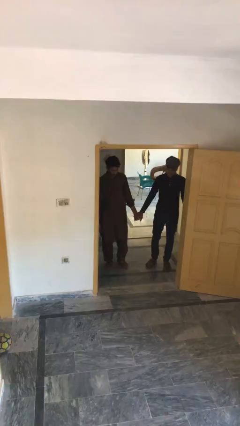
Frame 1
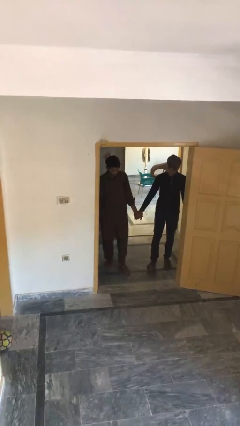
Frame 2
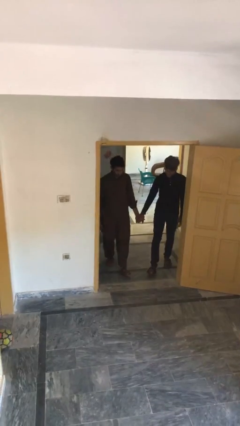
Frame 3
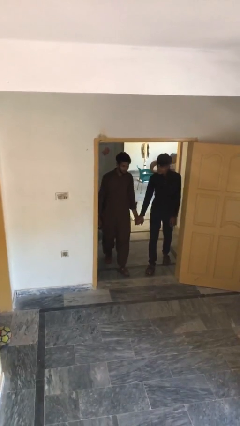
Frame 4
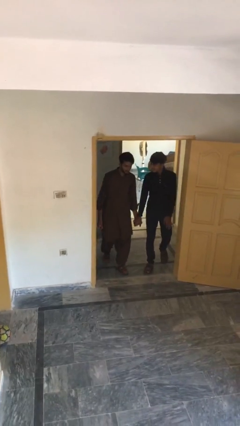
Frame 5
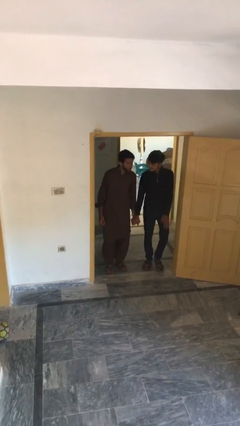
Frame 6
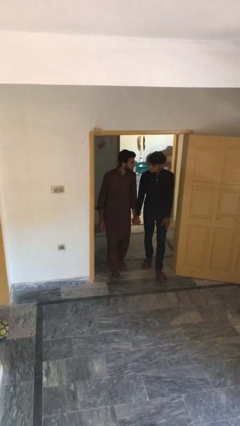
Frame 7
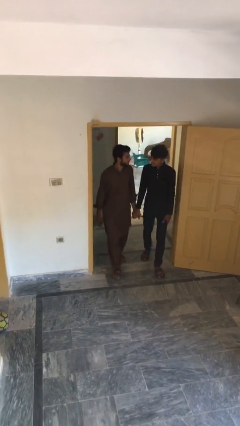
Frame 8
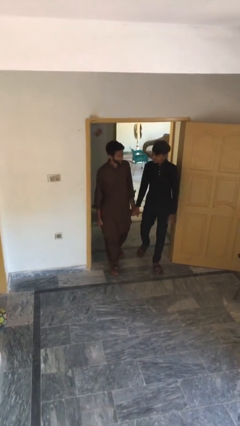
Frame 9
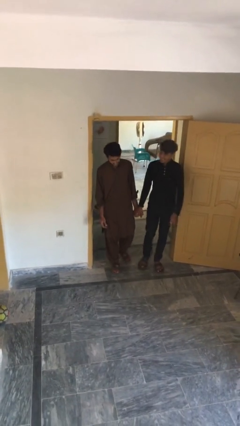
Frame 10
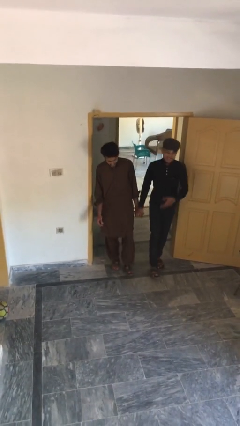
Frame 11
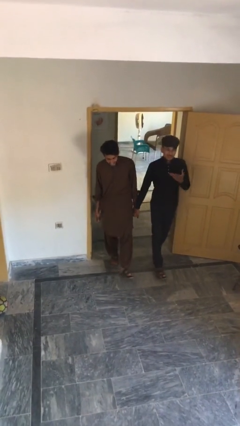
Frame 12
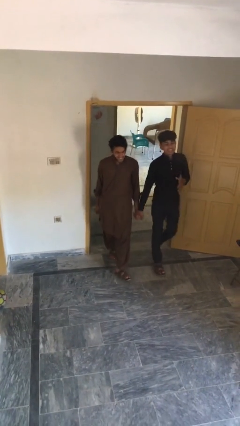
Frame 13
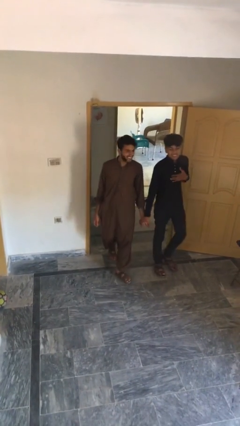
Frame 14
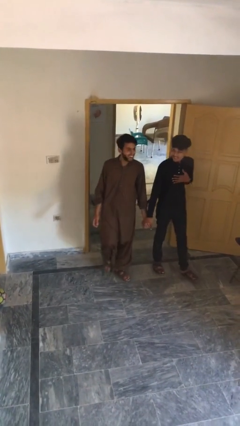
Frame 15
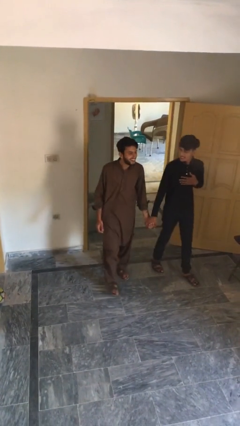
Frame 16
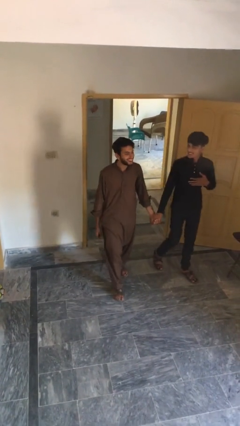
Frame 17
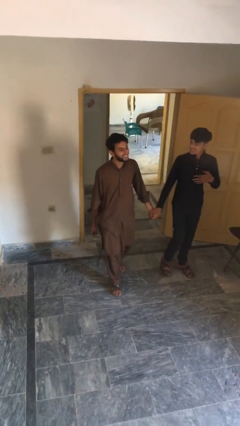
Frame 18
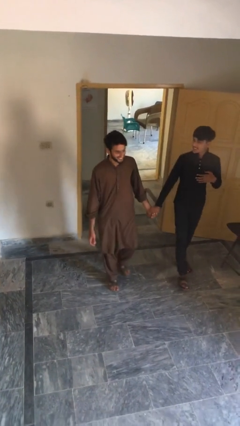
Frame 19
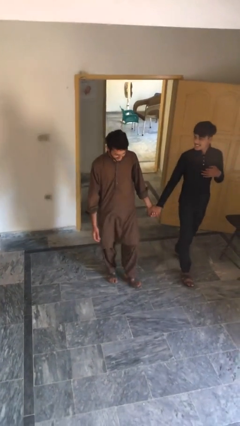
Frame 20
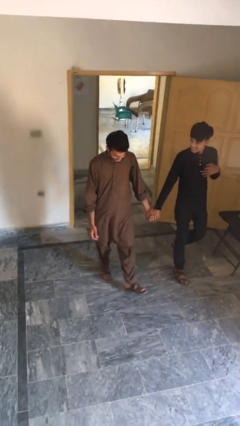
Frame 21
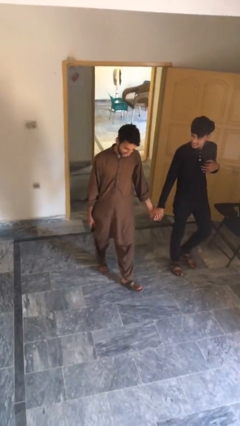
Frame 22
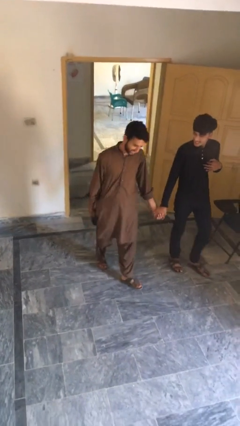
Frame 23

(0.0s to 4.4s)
person holds hand

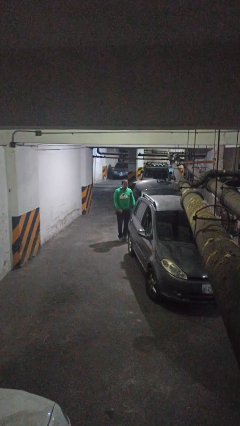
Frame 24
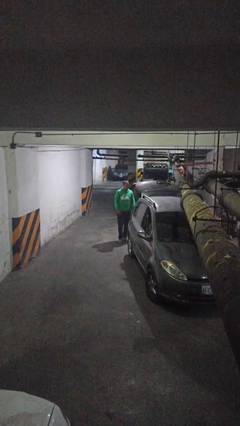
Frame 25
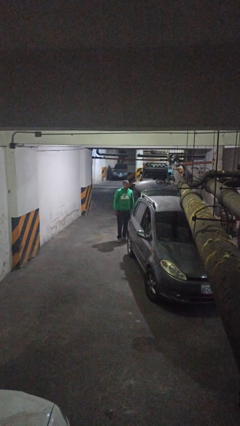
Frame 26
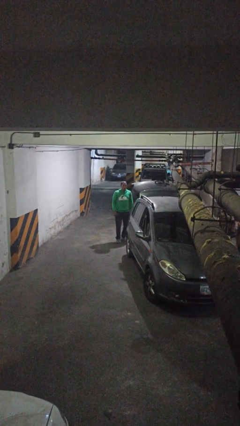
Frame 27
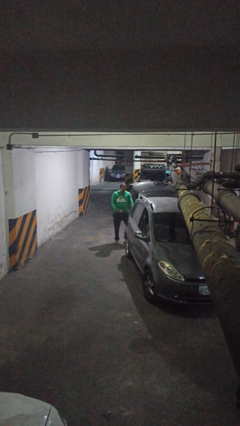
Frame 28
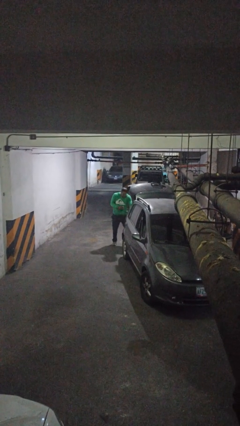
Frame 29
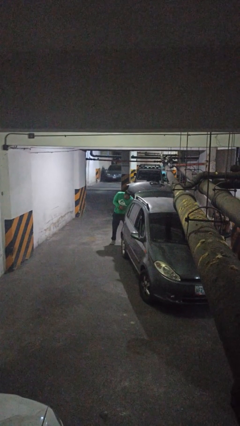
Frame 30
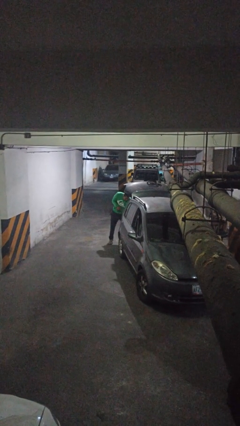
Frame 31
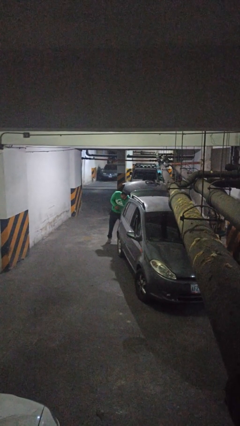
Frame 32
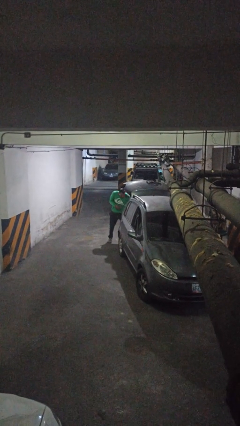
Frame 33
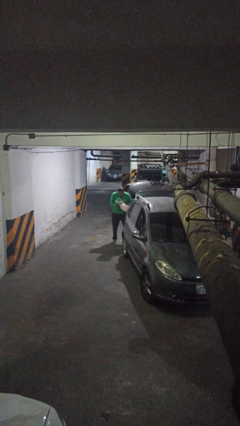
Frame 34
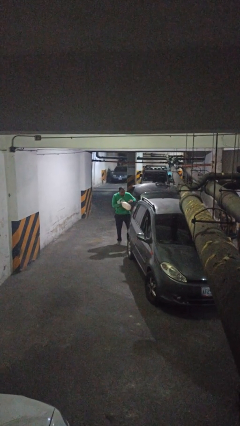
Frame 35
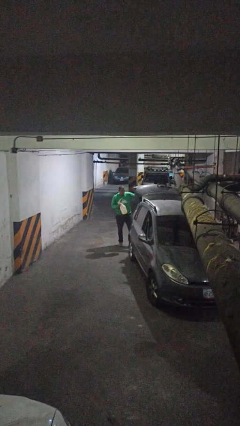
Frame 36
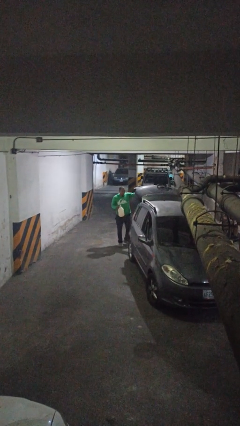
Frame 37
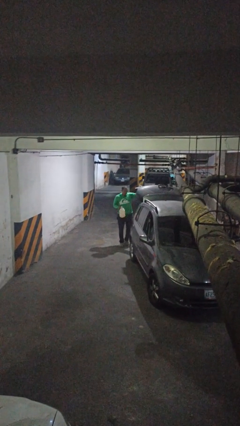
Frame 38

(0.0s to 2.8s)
person unloads car

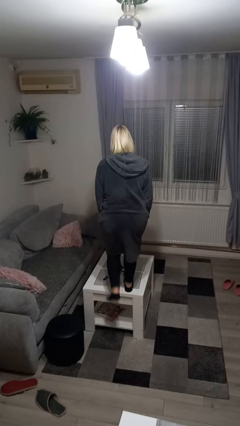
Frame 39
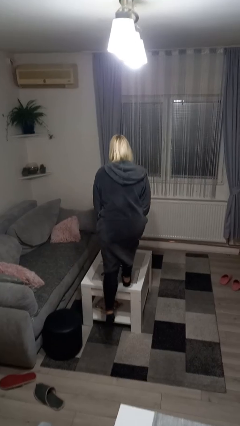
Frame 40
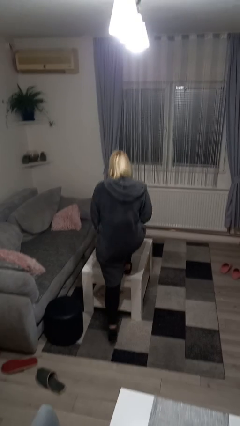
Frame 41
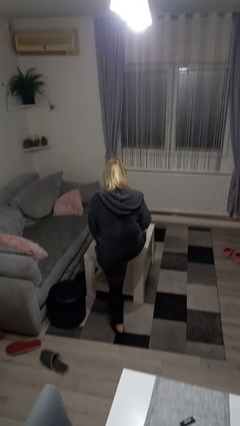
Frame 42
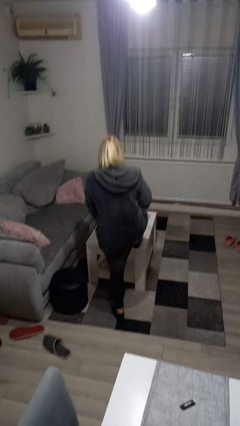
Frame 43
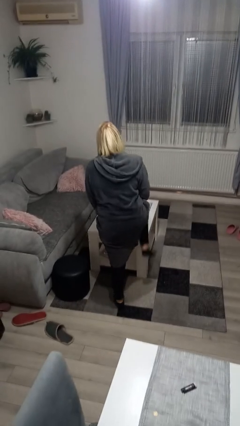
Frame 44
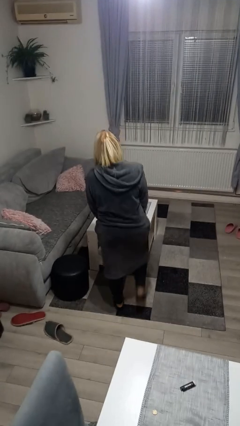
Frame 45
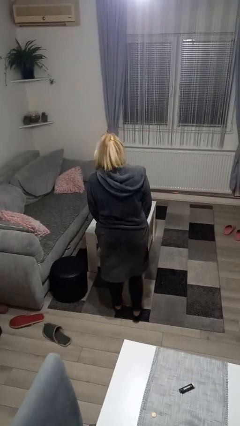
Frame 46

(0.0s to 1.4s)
person climbs off table

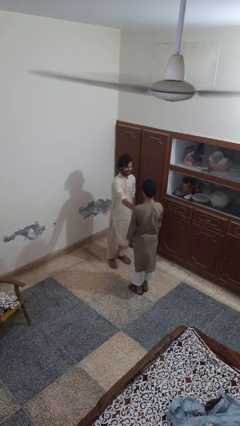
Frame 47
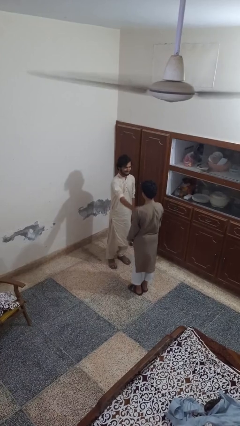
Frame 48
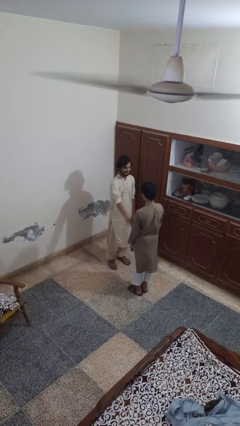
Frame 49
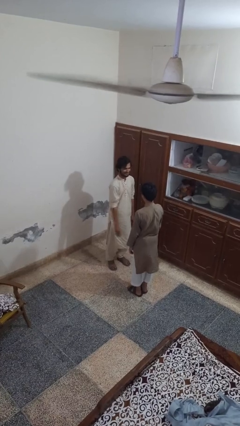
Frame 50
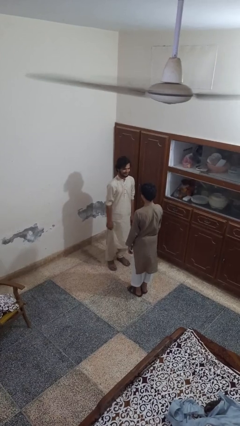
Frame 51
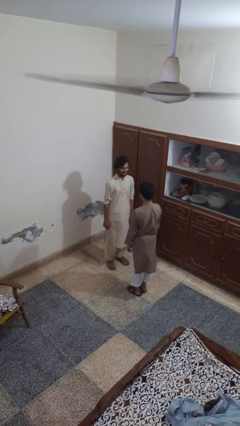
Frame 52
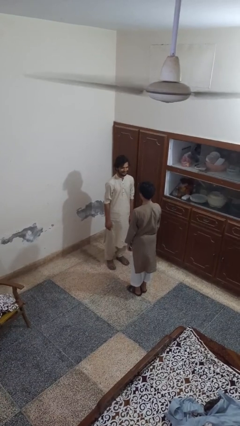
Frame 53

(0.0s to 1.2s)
person shoves person

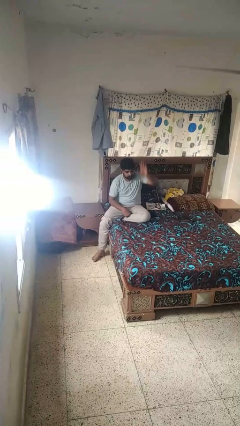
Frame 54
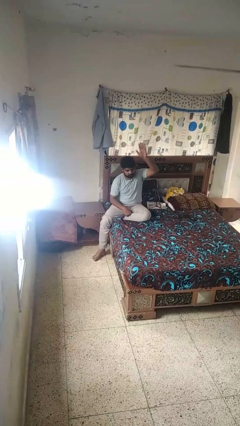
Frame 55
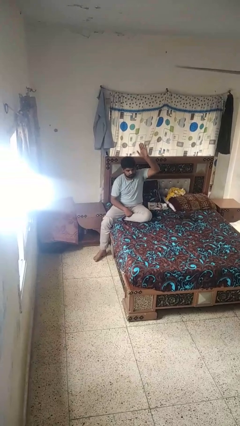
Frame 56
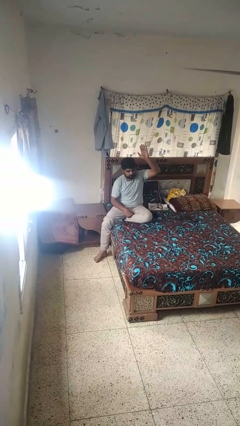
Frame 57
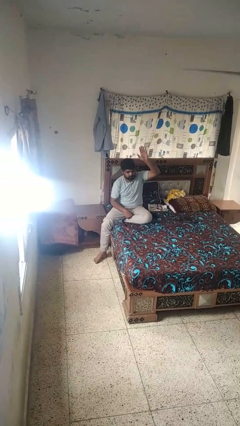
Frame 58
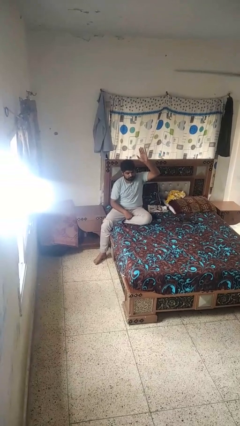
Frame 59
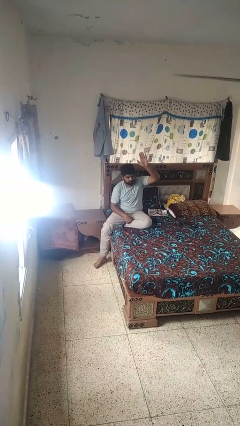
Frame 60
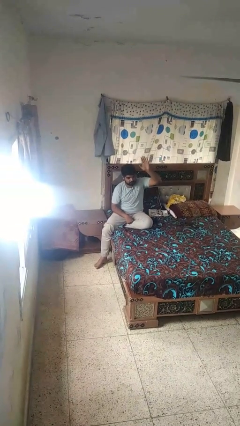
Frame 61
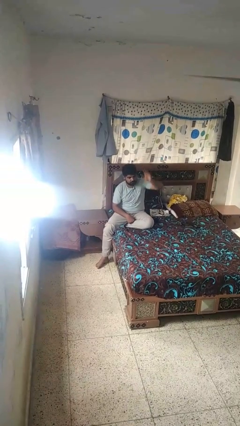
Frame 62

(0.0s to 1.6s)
person gestures raise hand

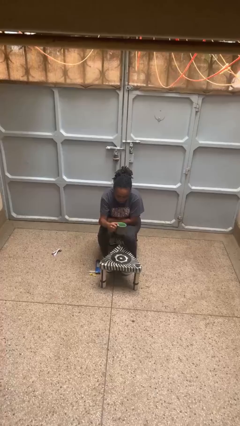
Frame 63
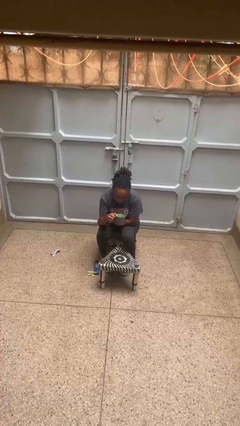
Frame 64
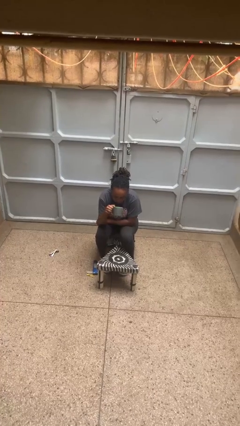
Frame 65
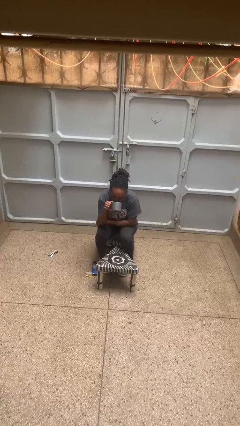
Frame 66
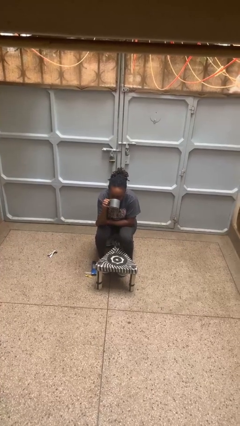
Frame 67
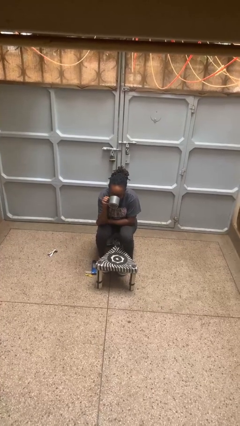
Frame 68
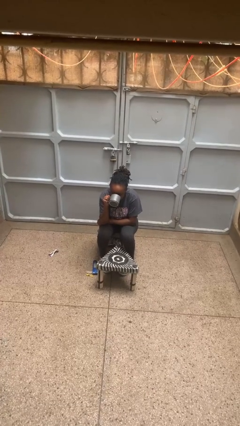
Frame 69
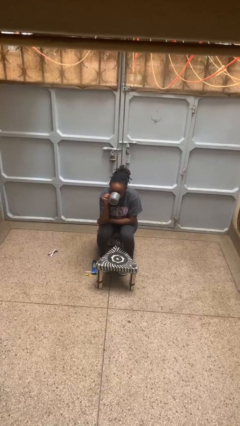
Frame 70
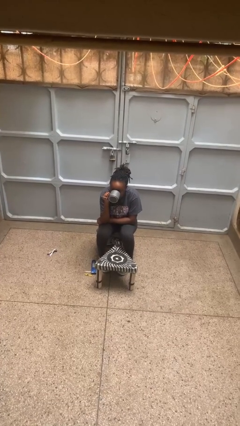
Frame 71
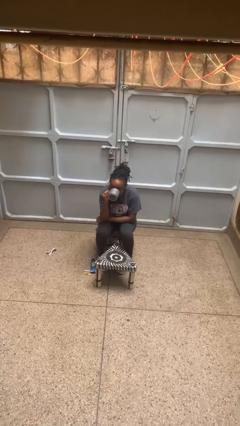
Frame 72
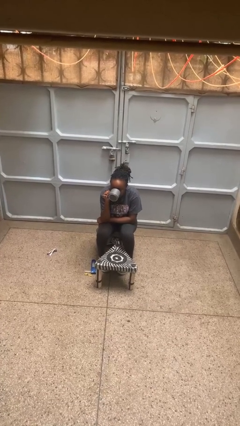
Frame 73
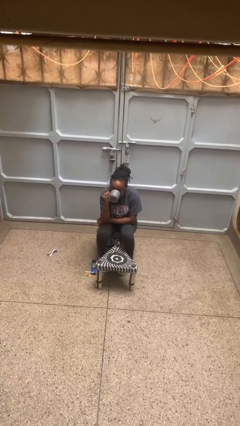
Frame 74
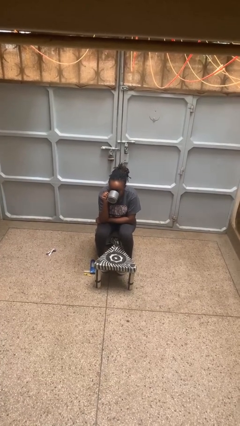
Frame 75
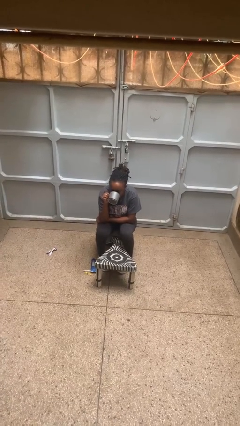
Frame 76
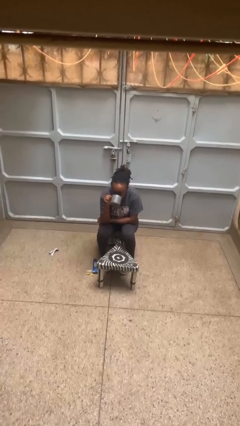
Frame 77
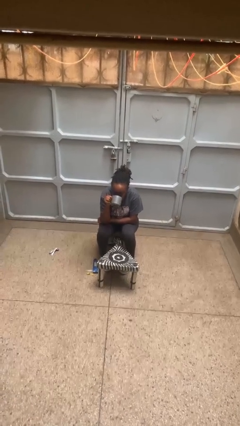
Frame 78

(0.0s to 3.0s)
person drinks from mug

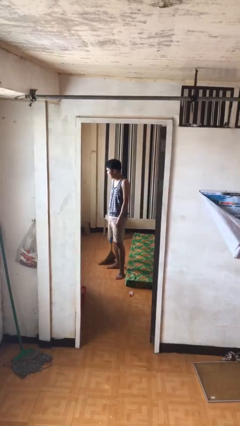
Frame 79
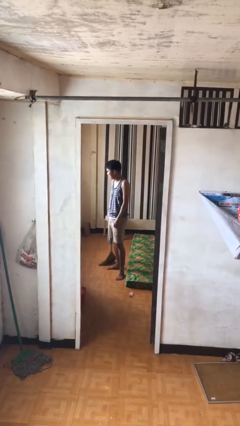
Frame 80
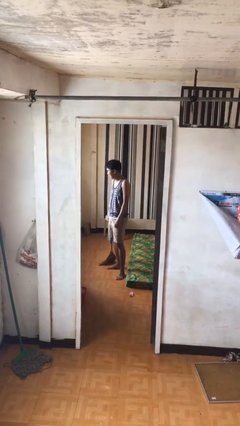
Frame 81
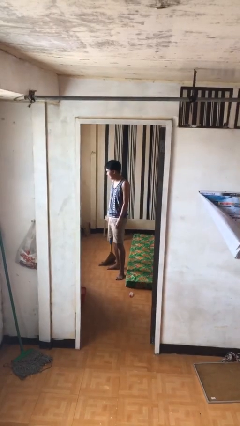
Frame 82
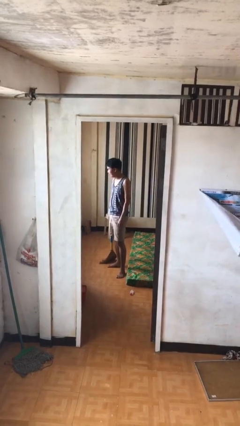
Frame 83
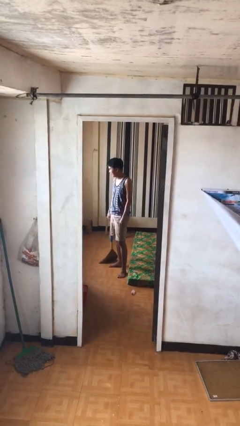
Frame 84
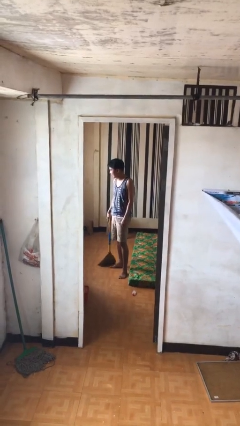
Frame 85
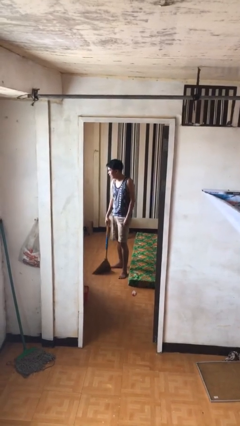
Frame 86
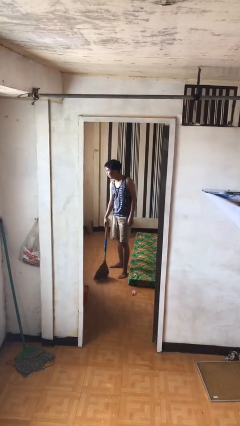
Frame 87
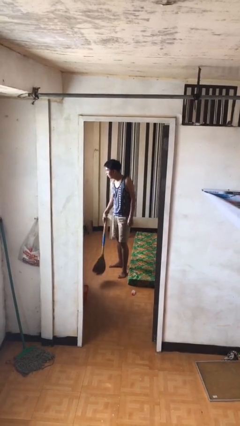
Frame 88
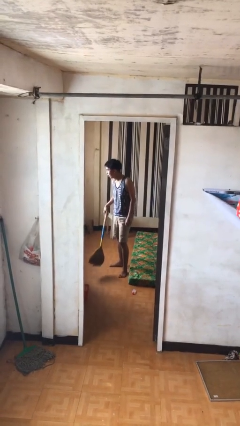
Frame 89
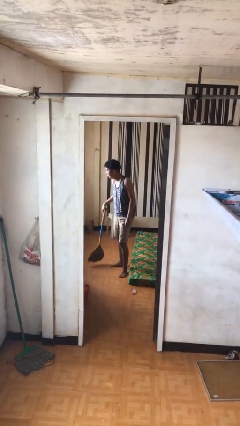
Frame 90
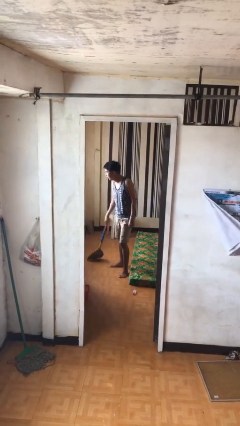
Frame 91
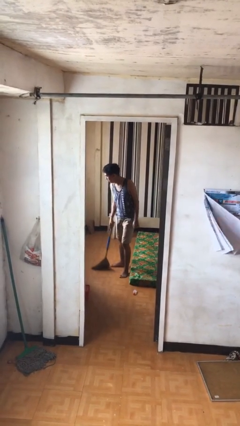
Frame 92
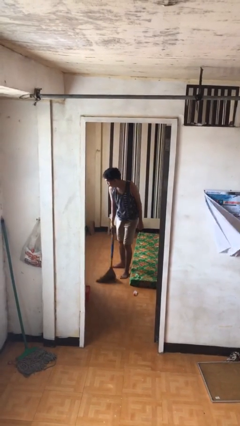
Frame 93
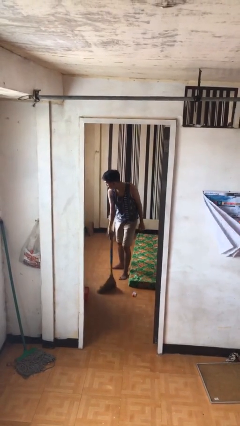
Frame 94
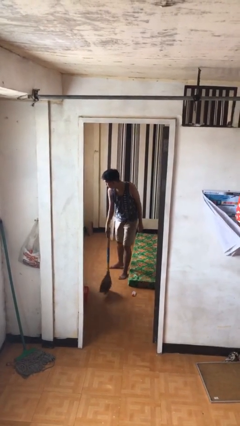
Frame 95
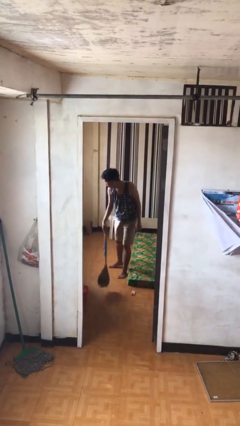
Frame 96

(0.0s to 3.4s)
person sweeps floor
